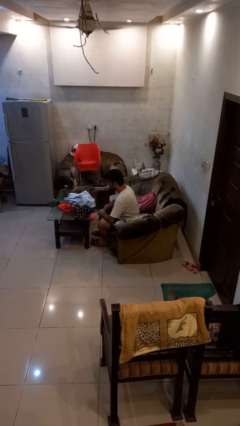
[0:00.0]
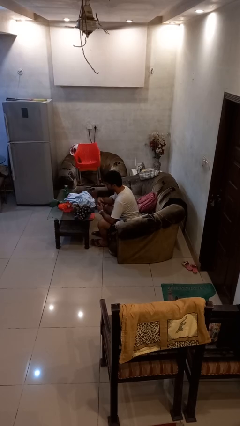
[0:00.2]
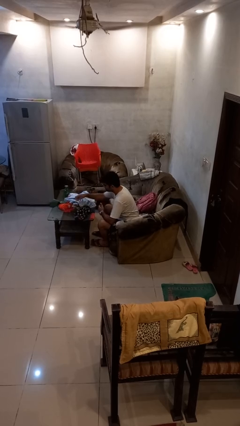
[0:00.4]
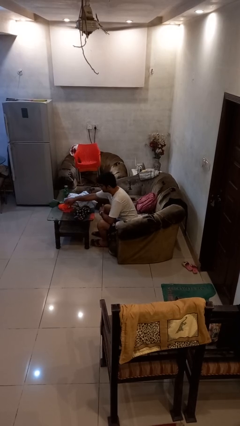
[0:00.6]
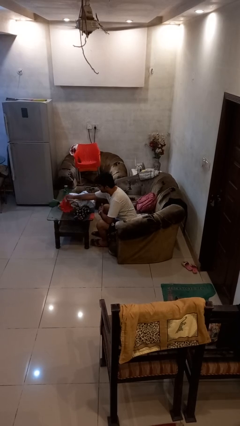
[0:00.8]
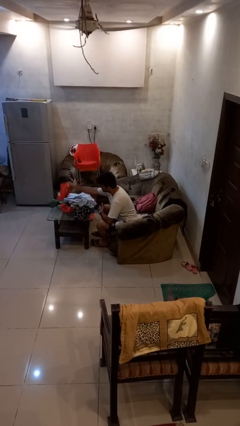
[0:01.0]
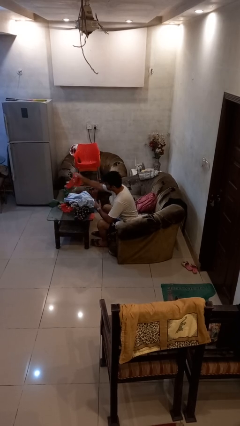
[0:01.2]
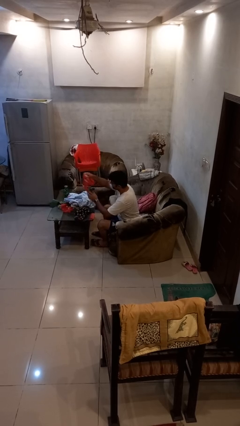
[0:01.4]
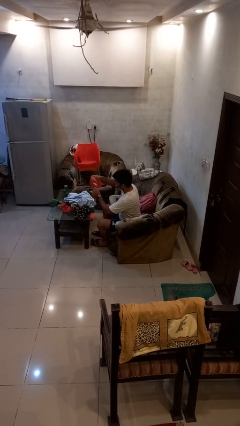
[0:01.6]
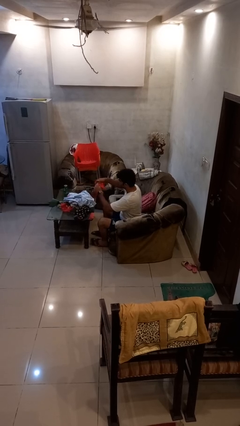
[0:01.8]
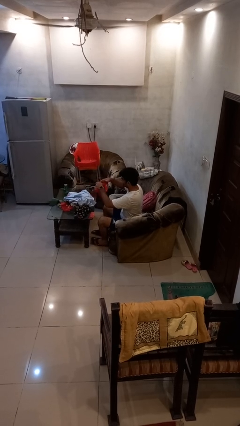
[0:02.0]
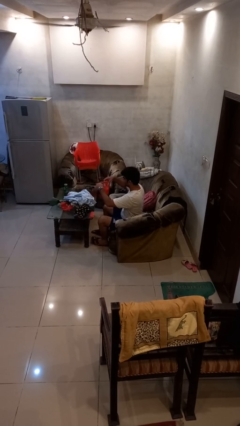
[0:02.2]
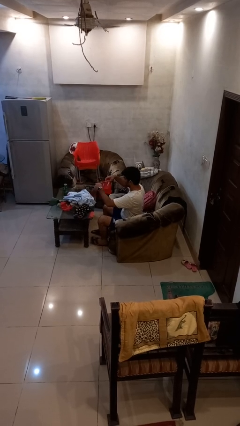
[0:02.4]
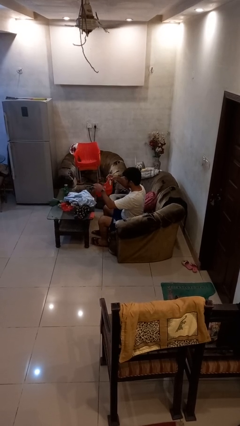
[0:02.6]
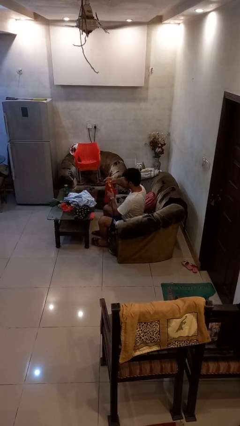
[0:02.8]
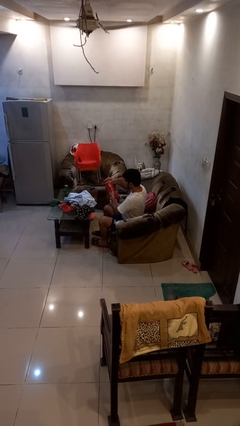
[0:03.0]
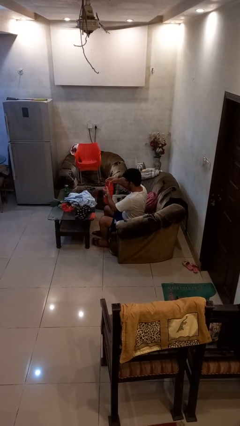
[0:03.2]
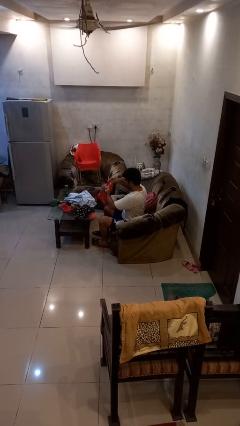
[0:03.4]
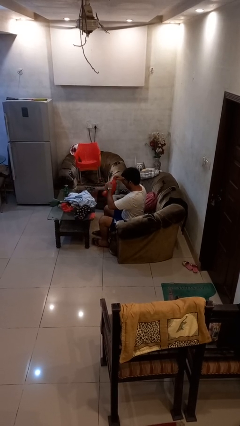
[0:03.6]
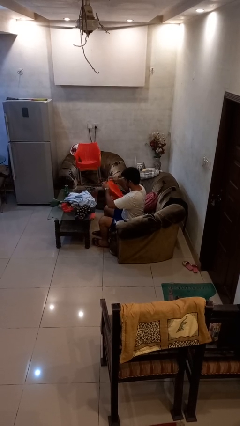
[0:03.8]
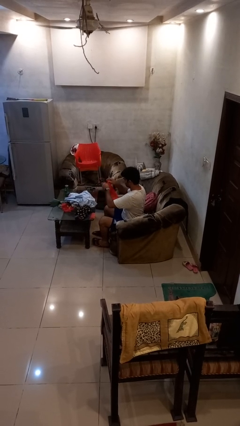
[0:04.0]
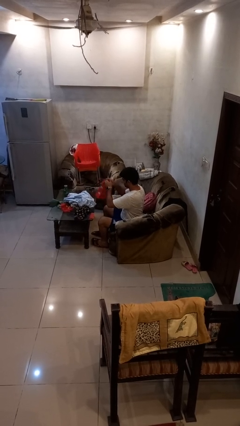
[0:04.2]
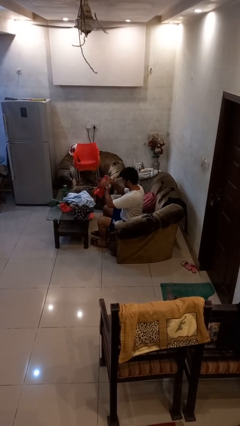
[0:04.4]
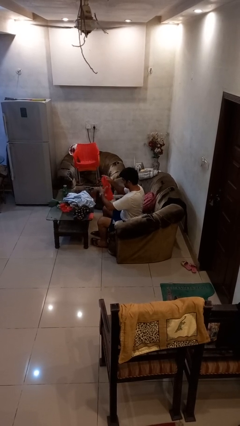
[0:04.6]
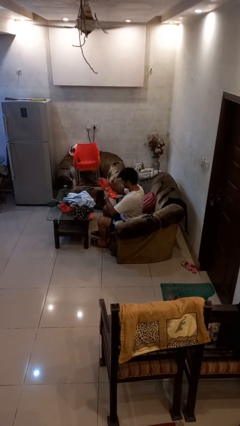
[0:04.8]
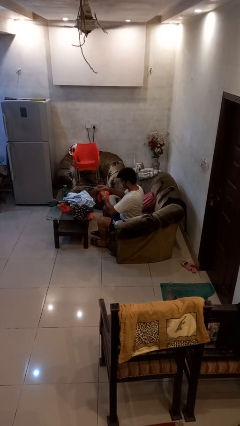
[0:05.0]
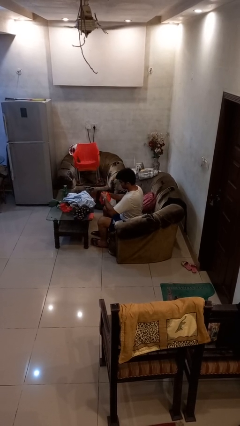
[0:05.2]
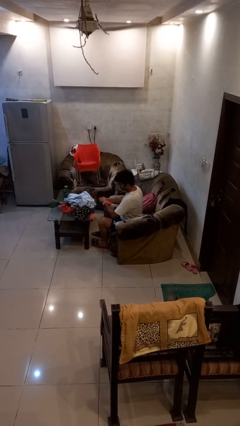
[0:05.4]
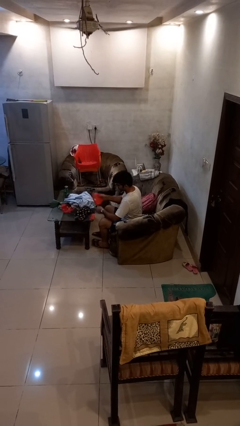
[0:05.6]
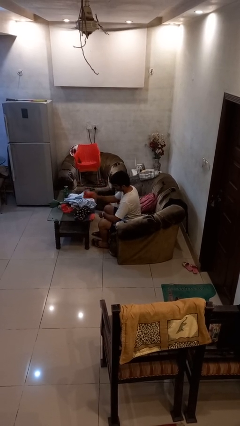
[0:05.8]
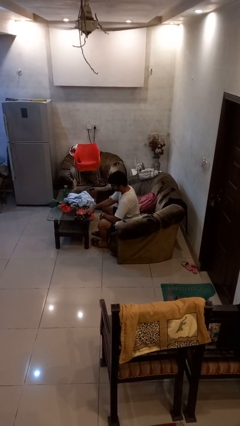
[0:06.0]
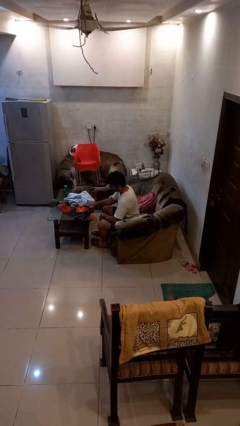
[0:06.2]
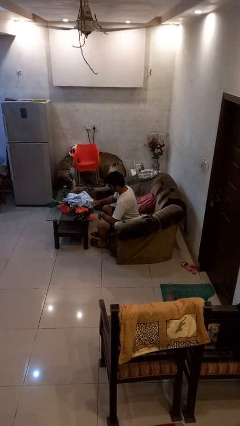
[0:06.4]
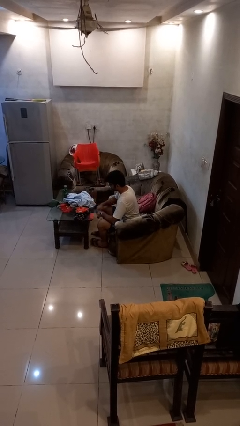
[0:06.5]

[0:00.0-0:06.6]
person folds shirt

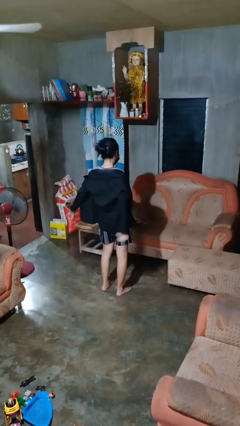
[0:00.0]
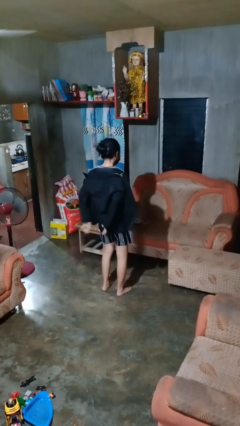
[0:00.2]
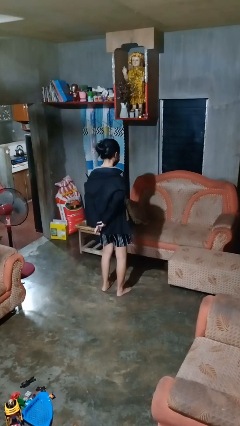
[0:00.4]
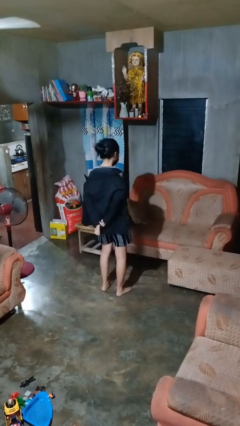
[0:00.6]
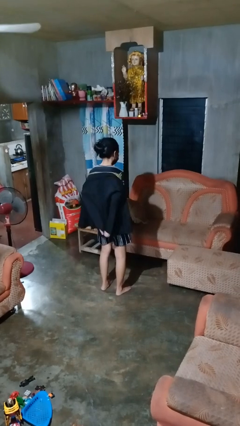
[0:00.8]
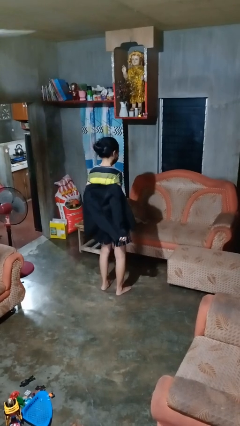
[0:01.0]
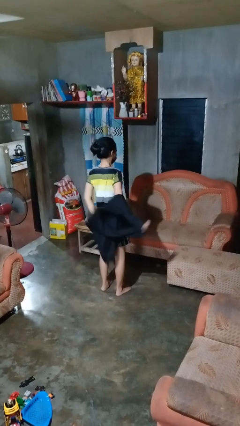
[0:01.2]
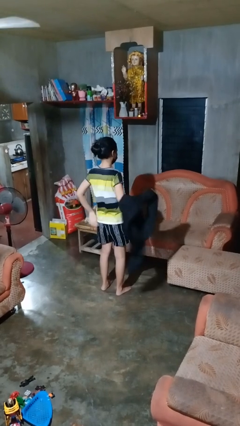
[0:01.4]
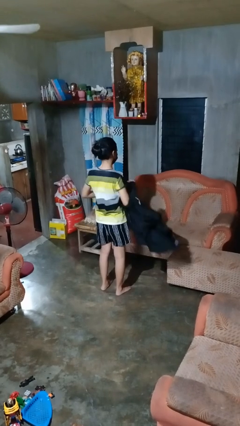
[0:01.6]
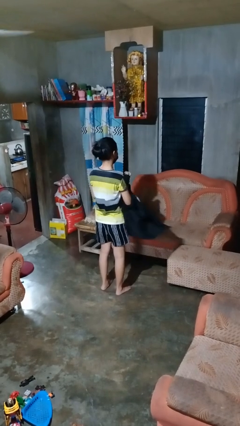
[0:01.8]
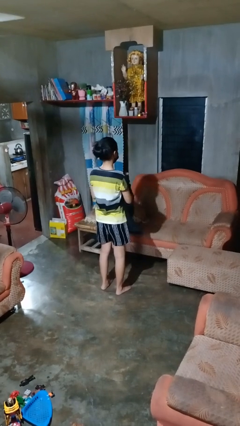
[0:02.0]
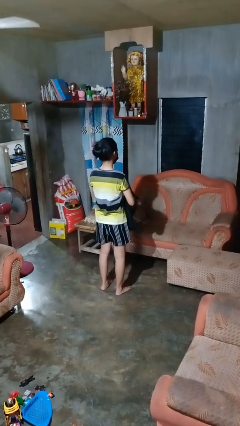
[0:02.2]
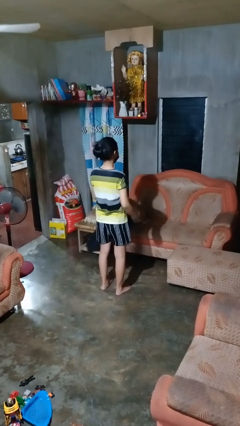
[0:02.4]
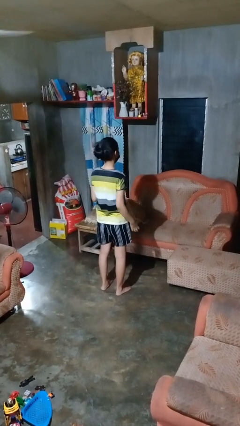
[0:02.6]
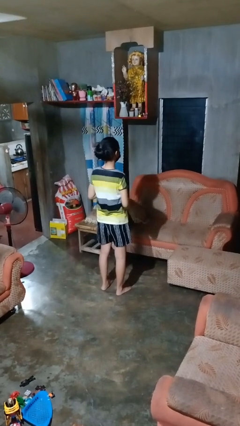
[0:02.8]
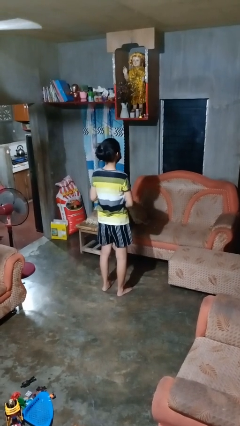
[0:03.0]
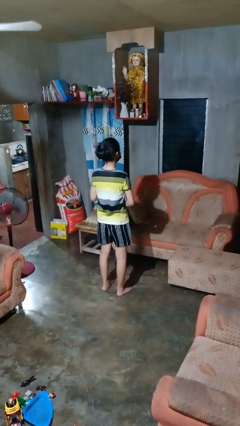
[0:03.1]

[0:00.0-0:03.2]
person takes off shirt

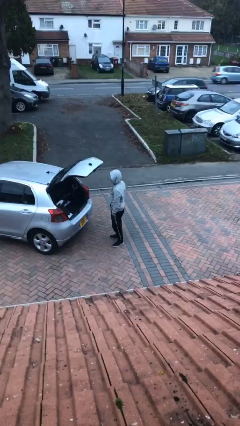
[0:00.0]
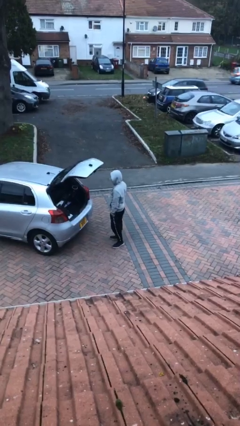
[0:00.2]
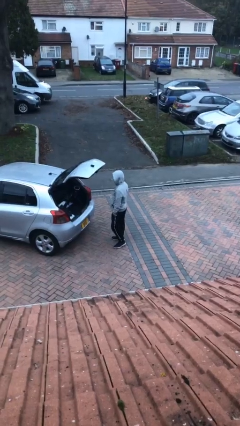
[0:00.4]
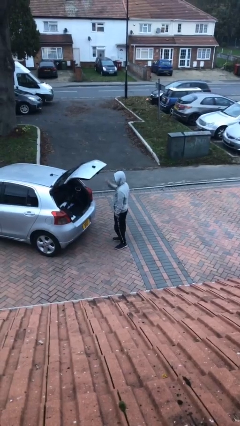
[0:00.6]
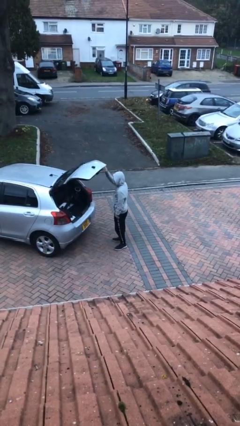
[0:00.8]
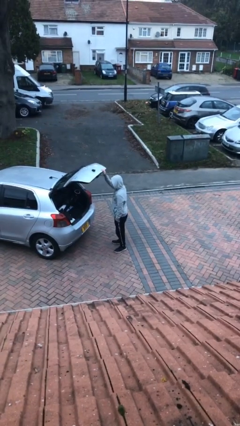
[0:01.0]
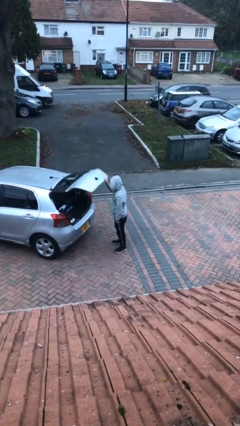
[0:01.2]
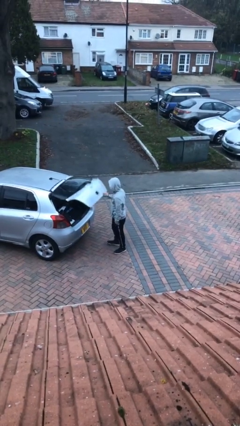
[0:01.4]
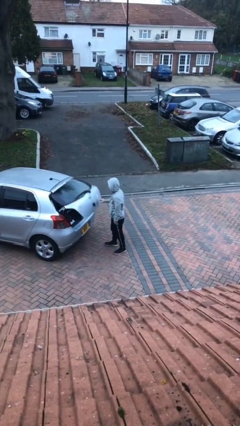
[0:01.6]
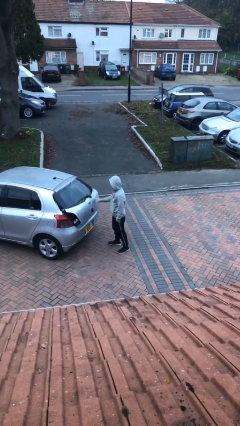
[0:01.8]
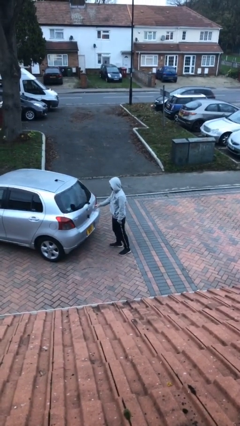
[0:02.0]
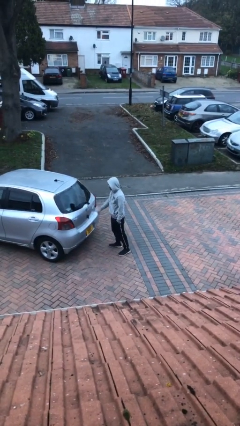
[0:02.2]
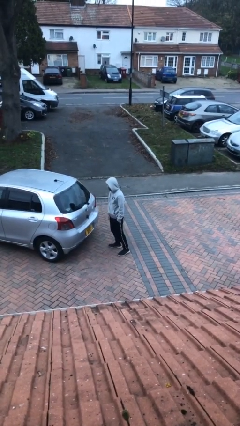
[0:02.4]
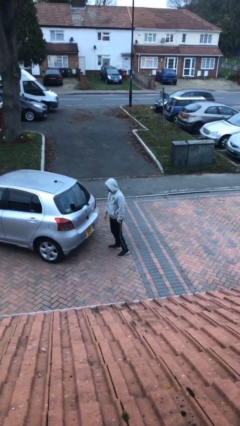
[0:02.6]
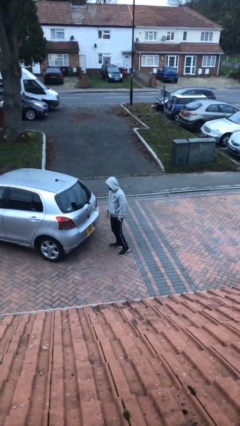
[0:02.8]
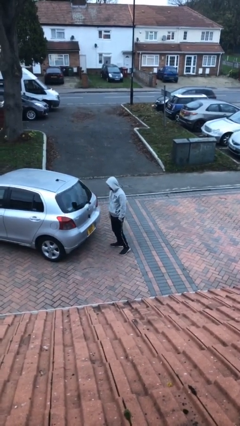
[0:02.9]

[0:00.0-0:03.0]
person closes car trunk

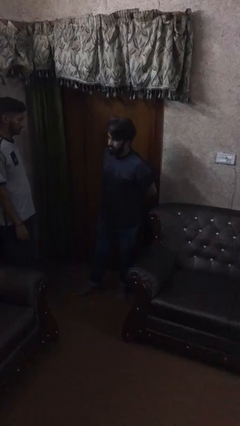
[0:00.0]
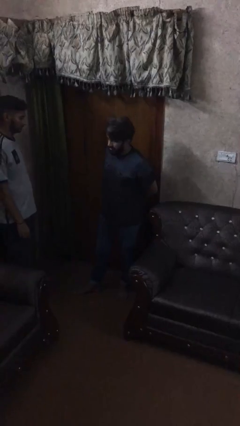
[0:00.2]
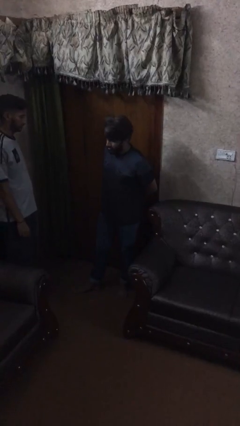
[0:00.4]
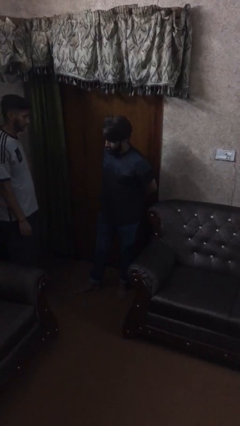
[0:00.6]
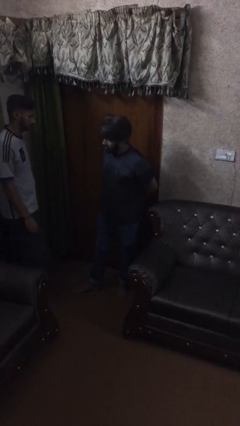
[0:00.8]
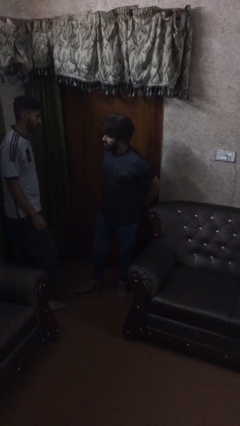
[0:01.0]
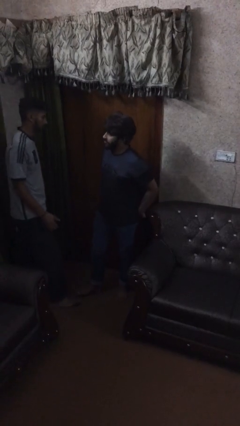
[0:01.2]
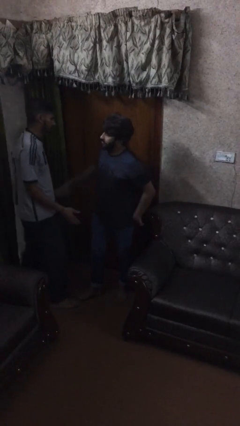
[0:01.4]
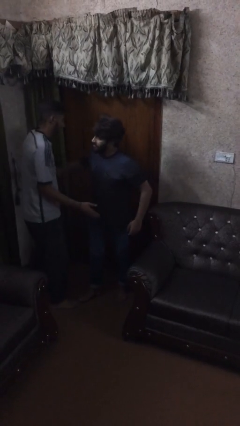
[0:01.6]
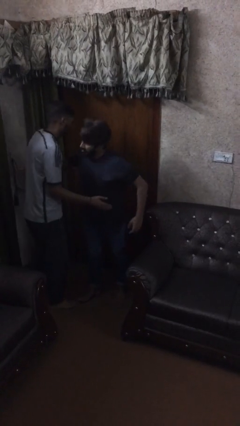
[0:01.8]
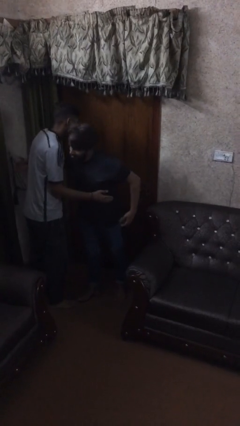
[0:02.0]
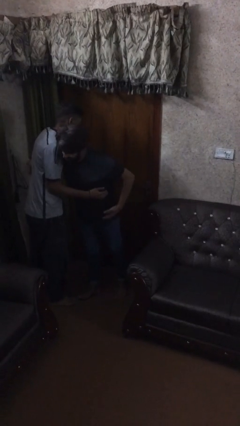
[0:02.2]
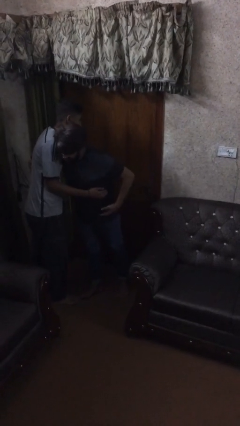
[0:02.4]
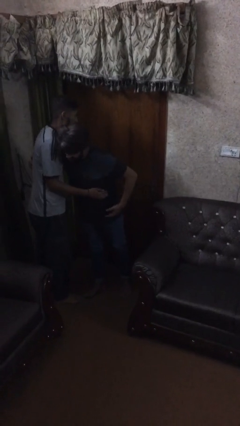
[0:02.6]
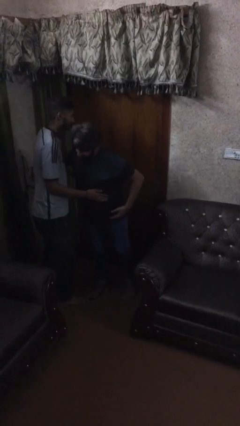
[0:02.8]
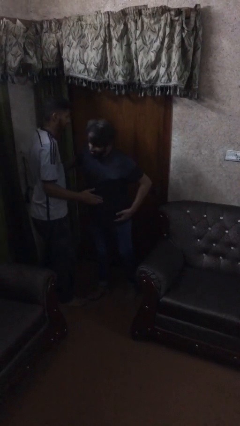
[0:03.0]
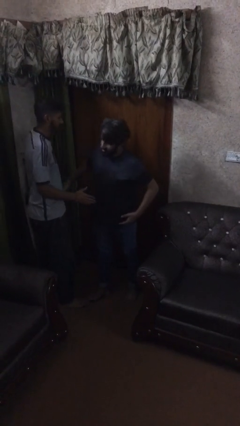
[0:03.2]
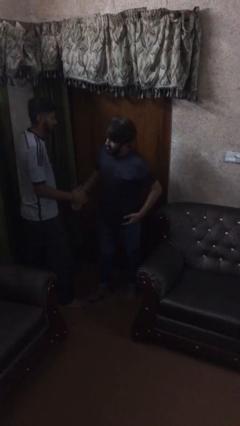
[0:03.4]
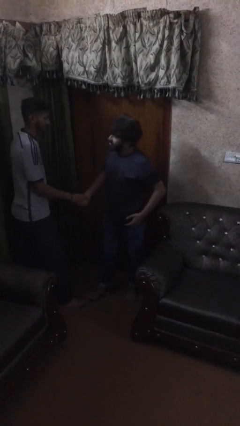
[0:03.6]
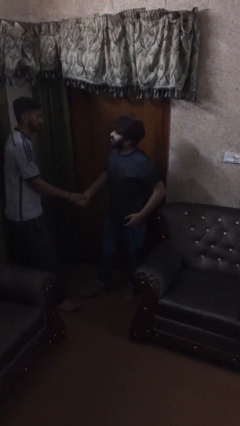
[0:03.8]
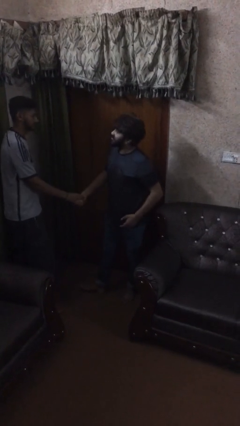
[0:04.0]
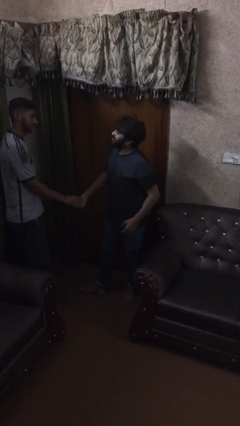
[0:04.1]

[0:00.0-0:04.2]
person embraces person

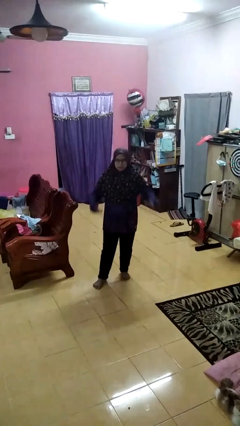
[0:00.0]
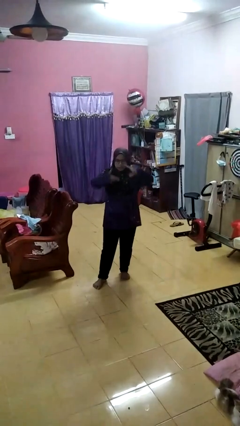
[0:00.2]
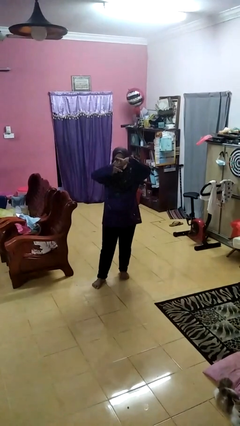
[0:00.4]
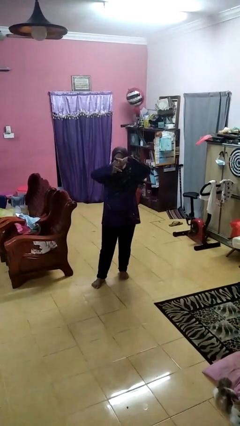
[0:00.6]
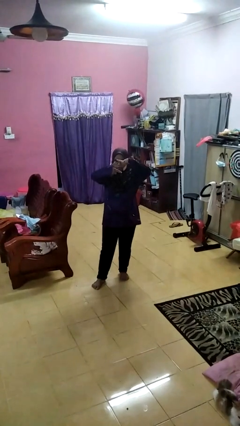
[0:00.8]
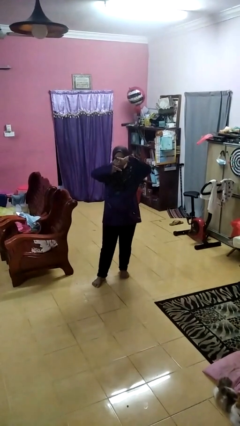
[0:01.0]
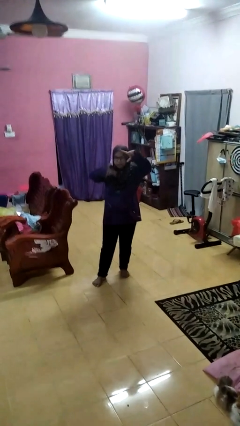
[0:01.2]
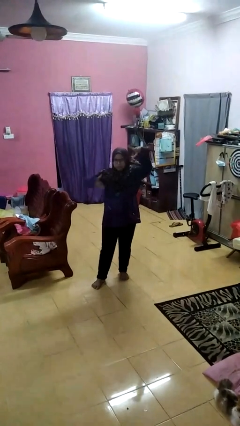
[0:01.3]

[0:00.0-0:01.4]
person gestures zoom in
